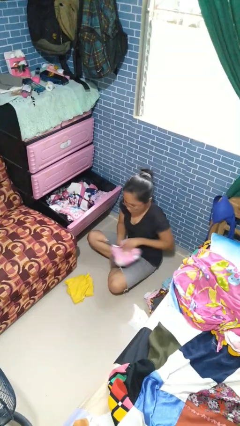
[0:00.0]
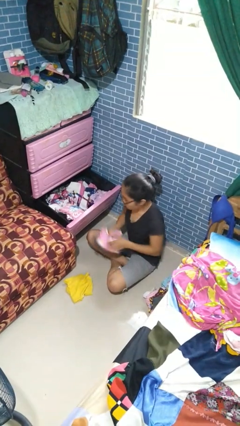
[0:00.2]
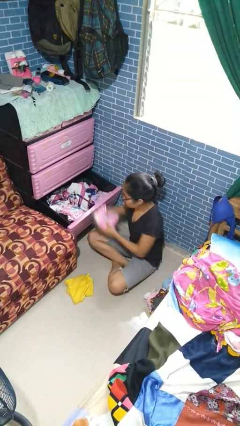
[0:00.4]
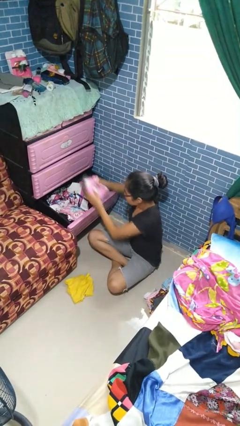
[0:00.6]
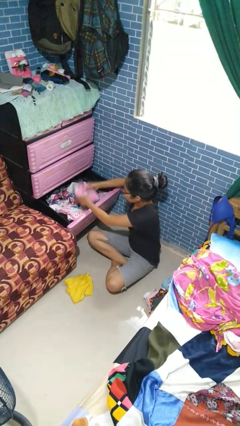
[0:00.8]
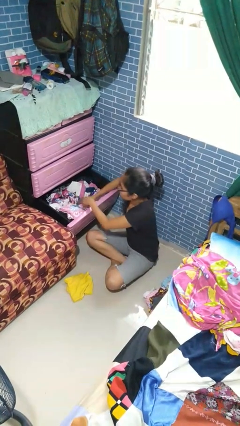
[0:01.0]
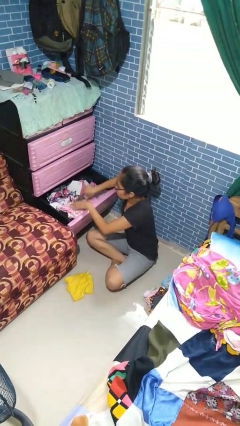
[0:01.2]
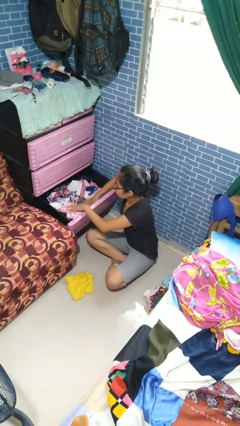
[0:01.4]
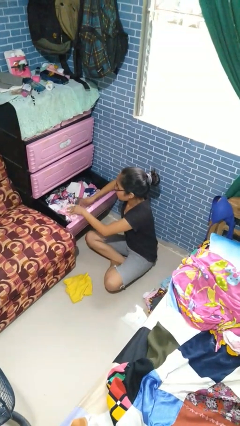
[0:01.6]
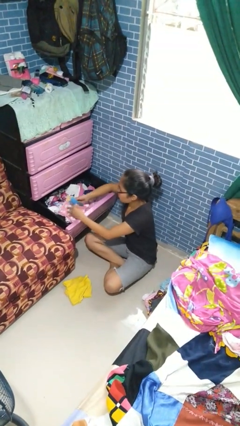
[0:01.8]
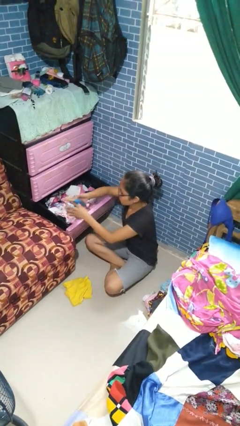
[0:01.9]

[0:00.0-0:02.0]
person puts clothes into dresser

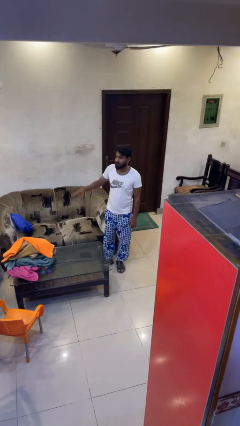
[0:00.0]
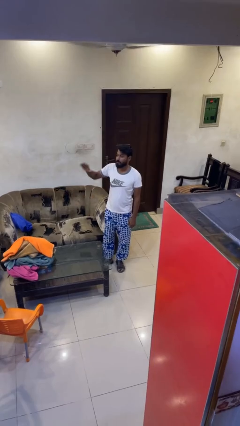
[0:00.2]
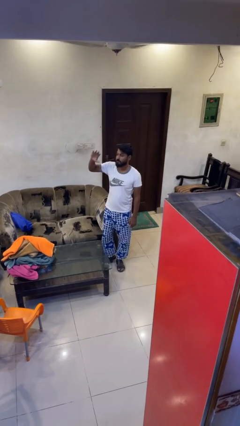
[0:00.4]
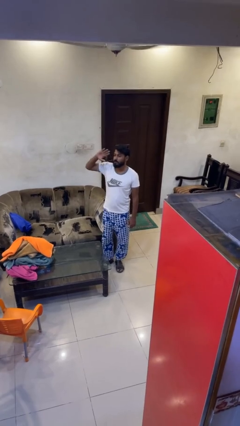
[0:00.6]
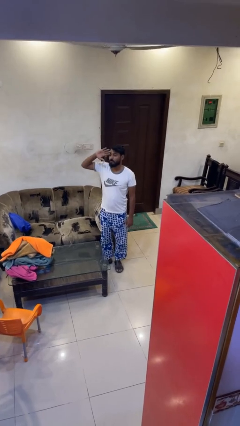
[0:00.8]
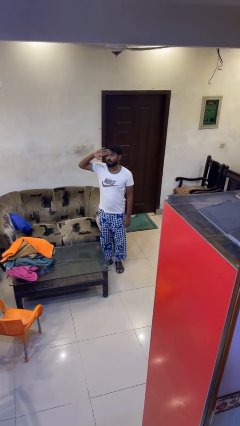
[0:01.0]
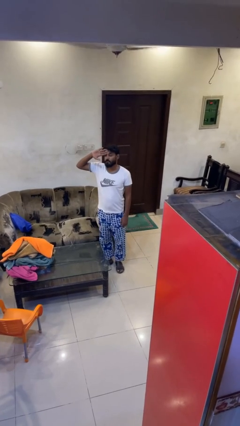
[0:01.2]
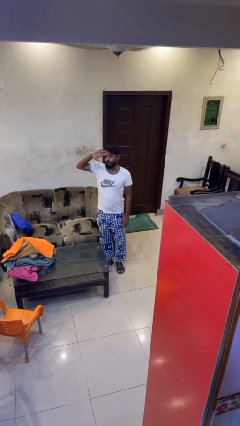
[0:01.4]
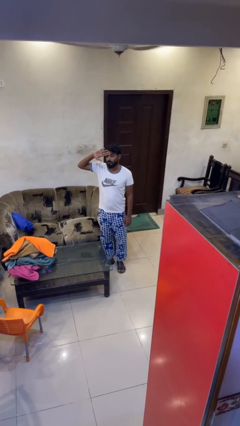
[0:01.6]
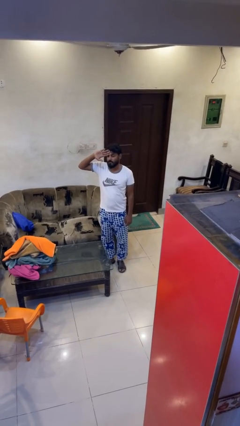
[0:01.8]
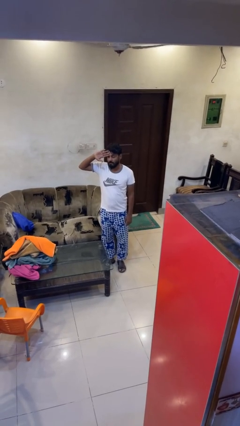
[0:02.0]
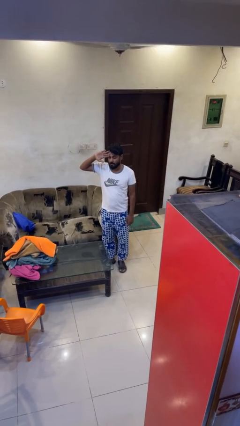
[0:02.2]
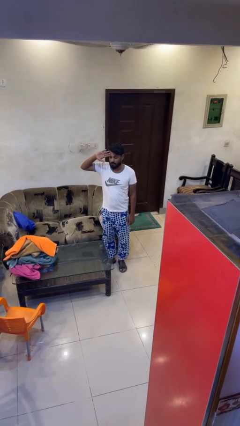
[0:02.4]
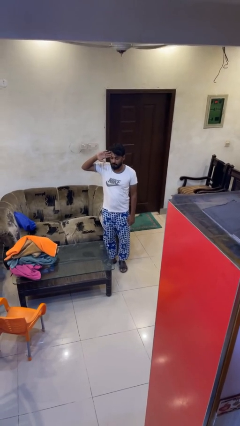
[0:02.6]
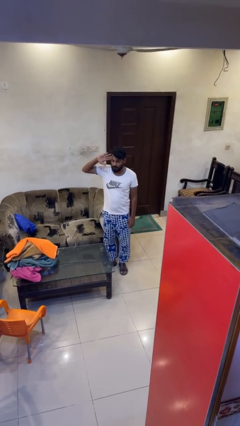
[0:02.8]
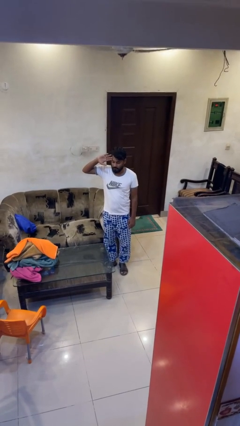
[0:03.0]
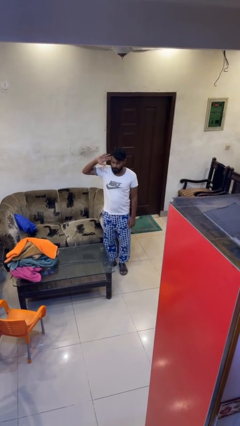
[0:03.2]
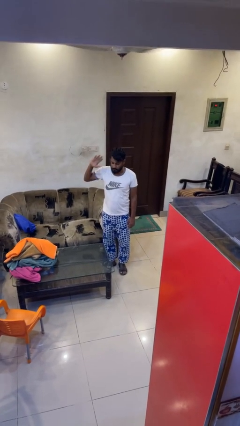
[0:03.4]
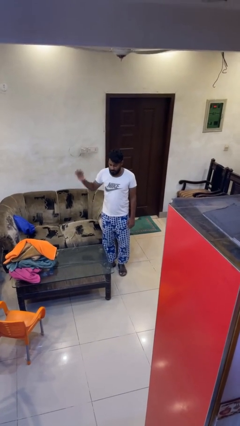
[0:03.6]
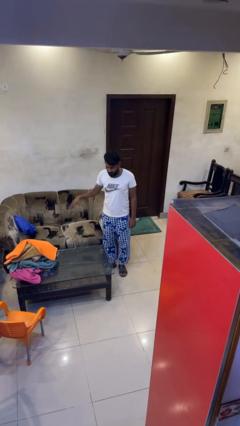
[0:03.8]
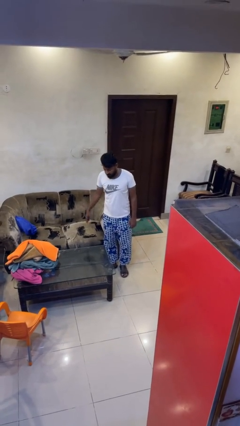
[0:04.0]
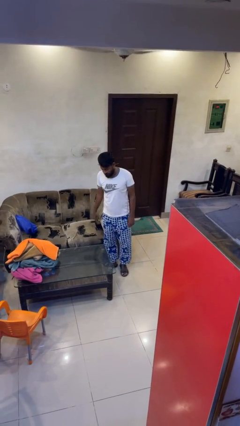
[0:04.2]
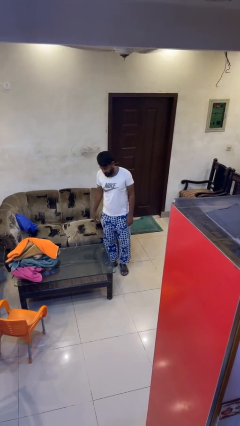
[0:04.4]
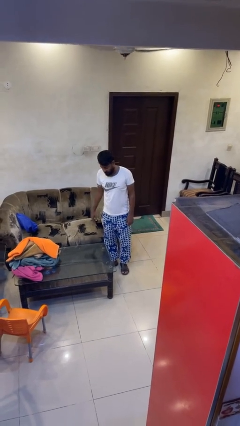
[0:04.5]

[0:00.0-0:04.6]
person salutes

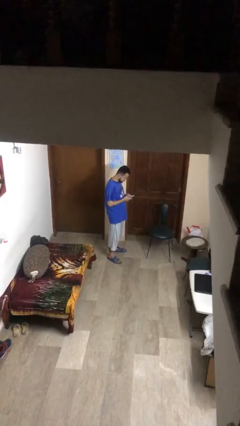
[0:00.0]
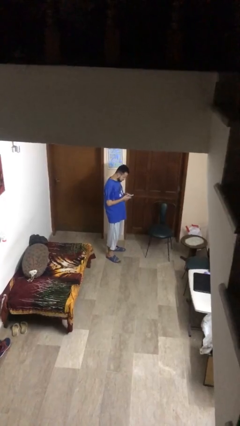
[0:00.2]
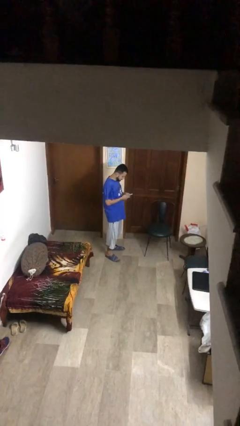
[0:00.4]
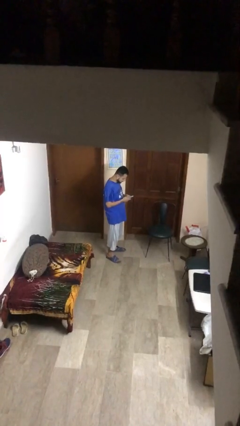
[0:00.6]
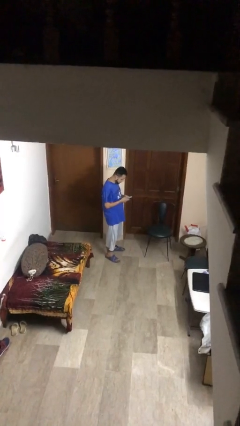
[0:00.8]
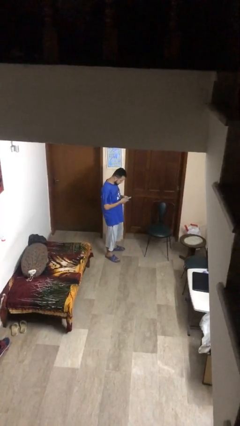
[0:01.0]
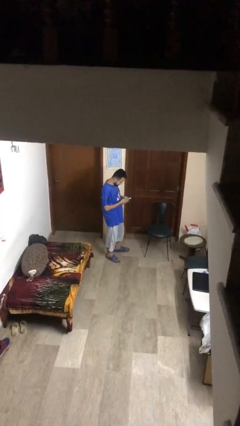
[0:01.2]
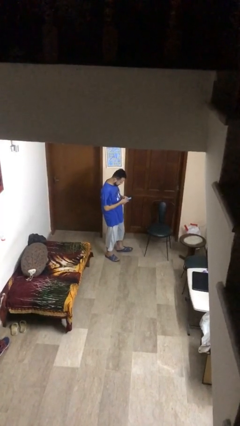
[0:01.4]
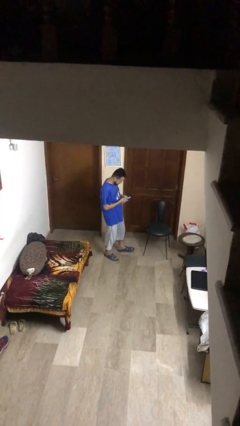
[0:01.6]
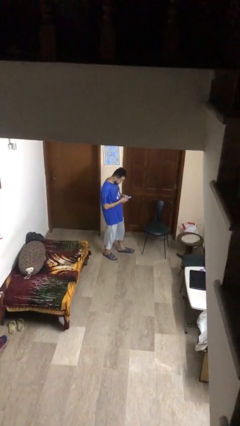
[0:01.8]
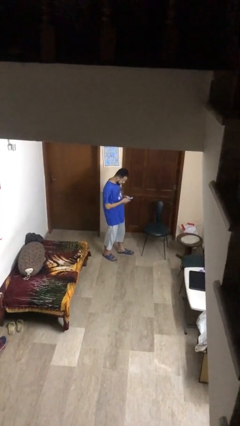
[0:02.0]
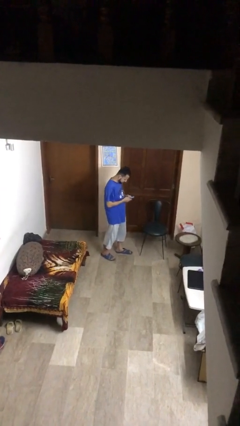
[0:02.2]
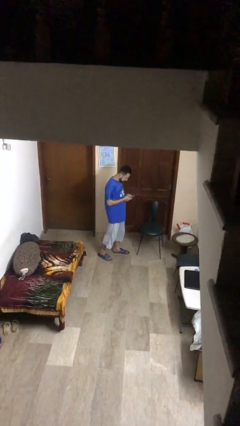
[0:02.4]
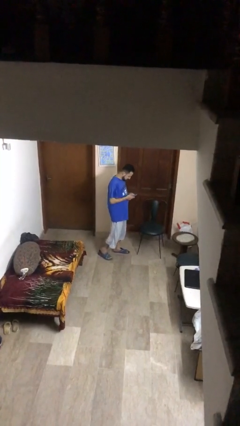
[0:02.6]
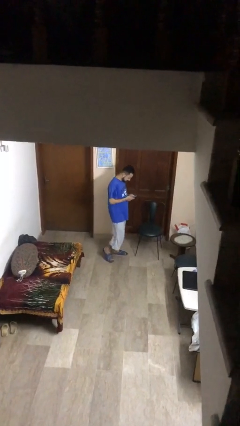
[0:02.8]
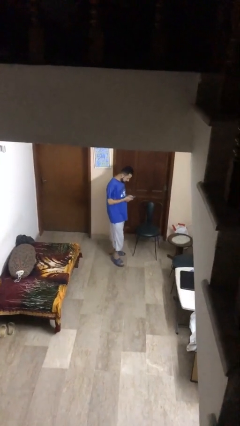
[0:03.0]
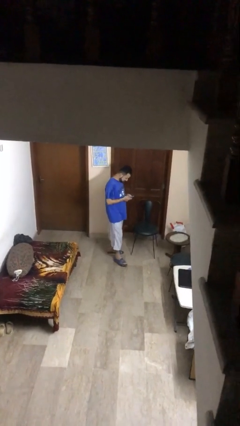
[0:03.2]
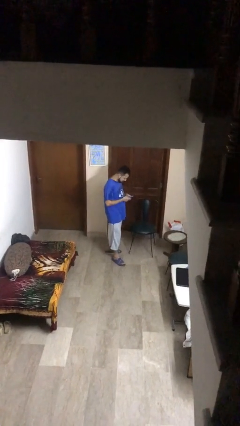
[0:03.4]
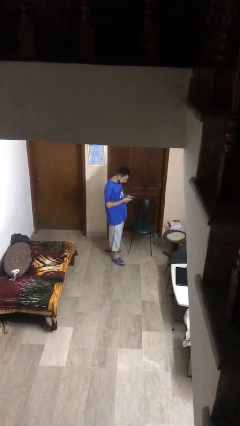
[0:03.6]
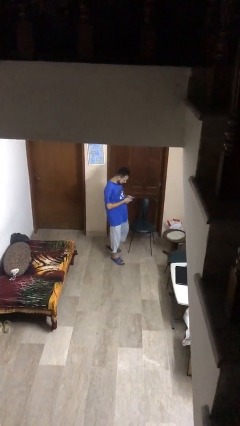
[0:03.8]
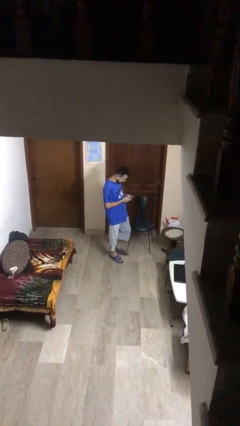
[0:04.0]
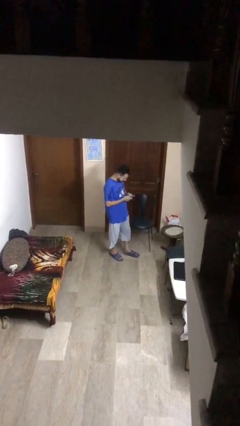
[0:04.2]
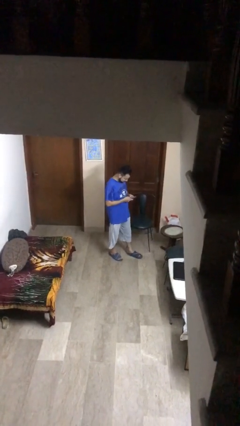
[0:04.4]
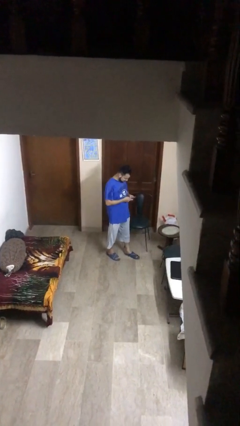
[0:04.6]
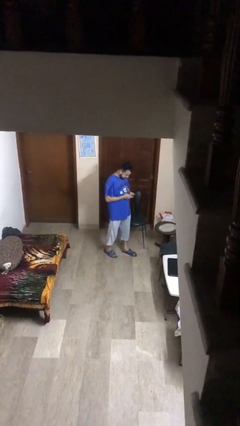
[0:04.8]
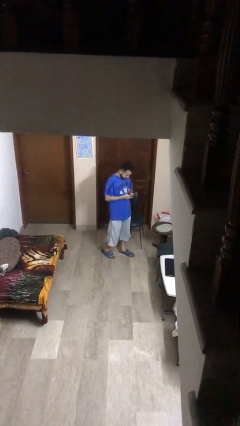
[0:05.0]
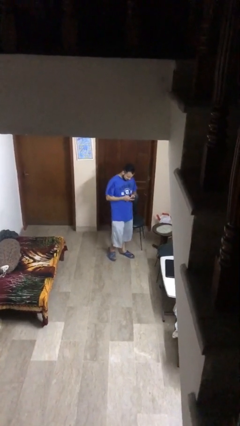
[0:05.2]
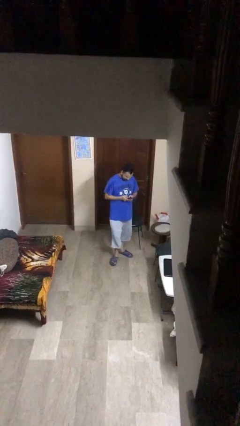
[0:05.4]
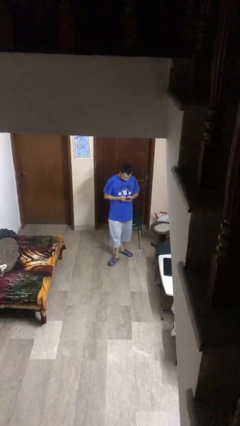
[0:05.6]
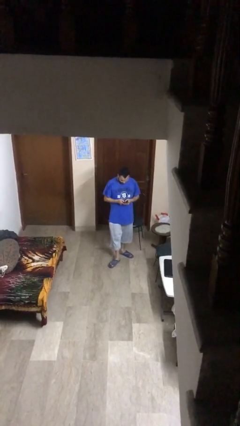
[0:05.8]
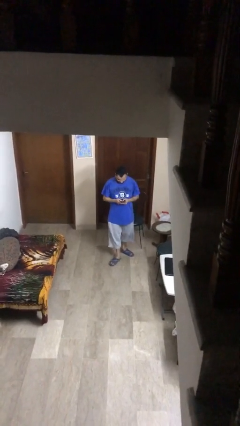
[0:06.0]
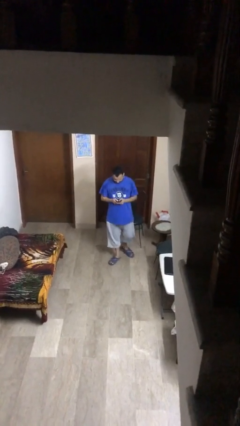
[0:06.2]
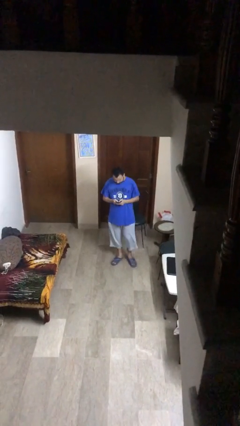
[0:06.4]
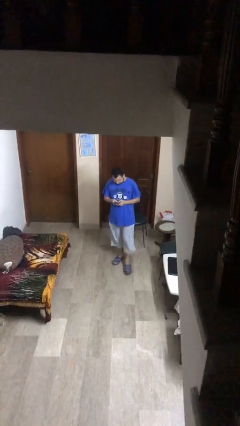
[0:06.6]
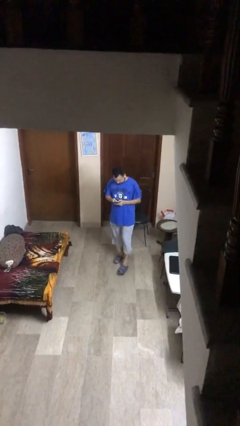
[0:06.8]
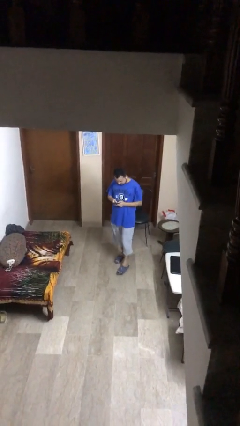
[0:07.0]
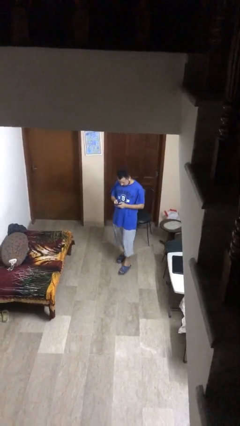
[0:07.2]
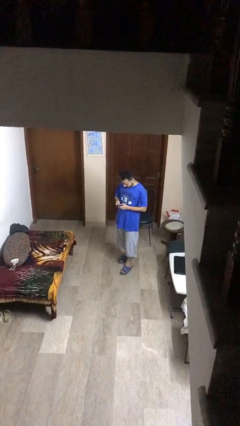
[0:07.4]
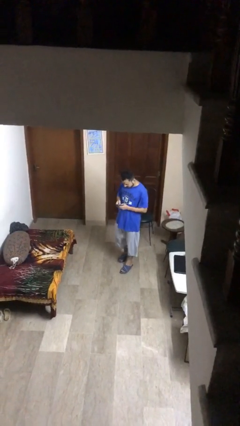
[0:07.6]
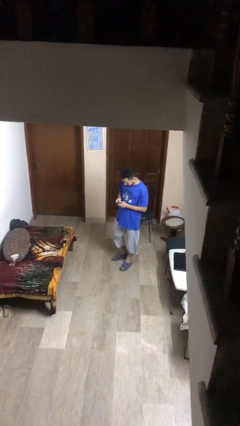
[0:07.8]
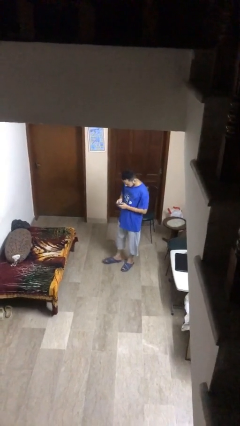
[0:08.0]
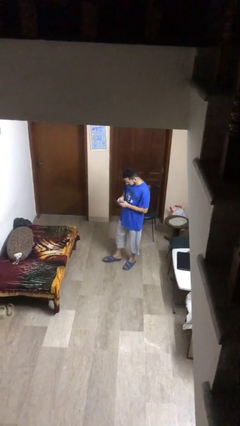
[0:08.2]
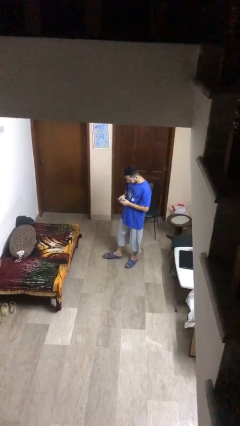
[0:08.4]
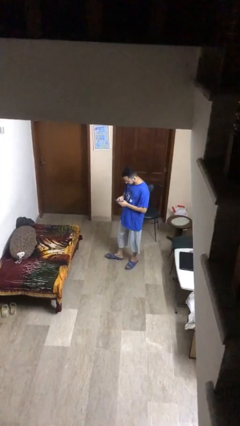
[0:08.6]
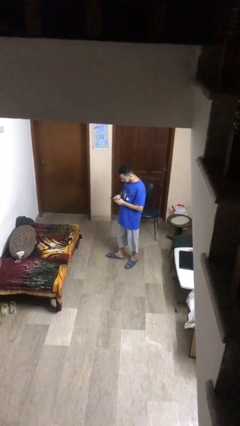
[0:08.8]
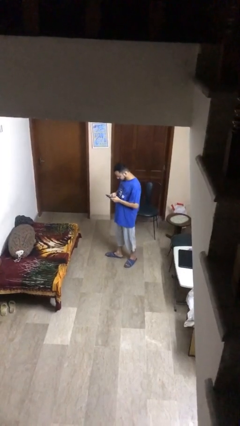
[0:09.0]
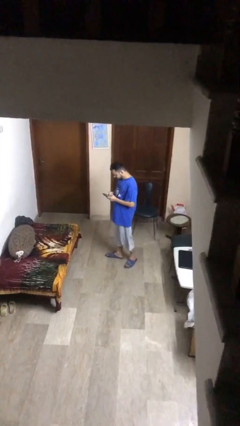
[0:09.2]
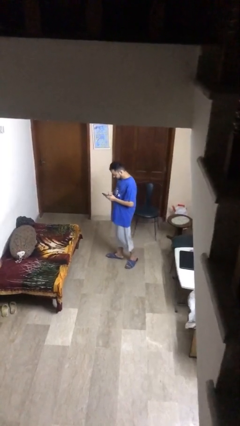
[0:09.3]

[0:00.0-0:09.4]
person texts on phone

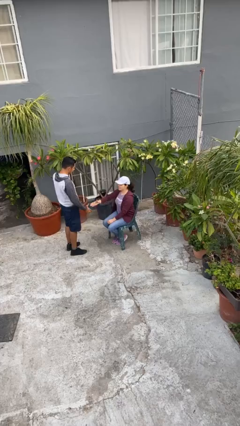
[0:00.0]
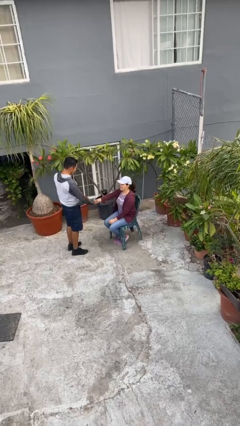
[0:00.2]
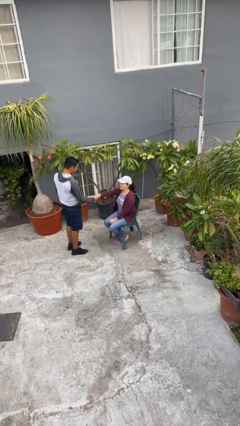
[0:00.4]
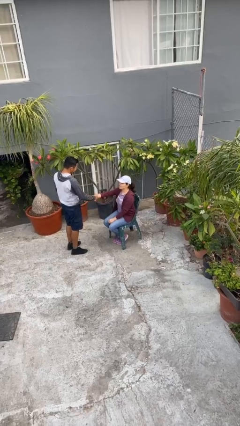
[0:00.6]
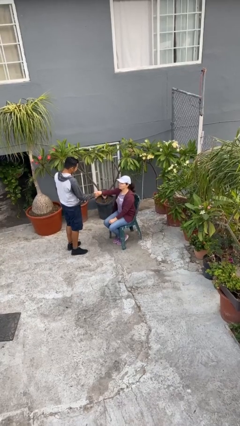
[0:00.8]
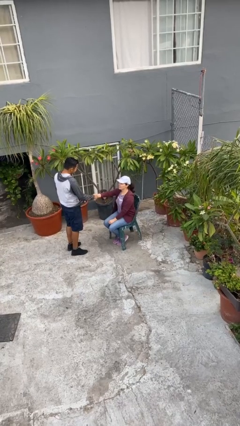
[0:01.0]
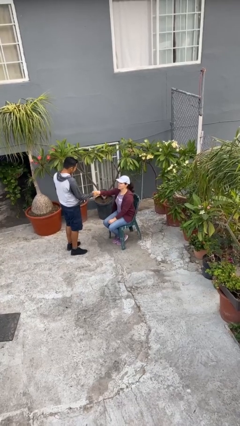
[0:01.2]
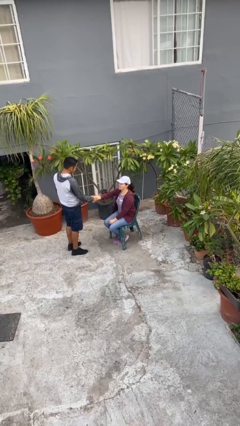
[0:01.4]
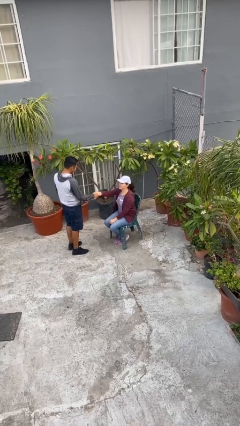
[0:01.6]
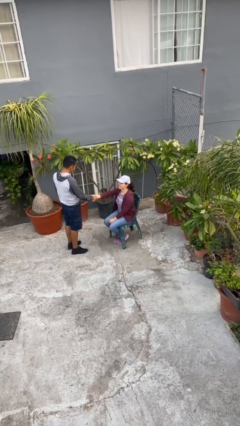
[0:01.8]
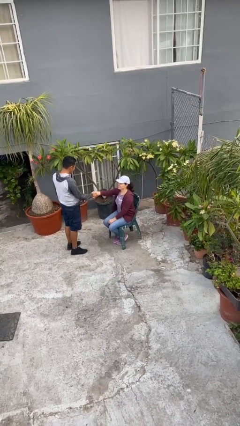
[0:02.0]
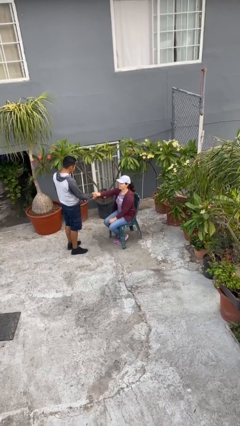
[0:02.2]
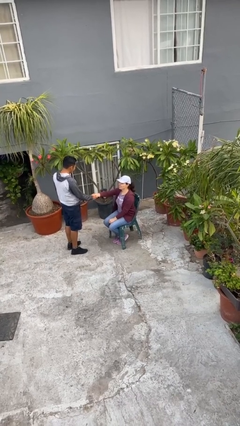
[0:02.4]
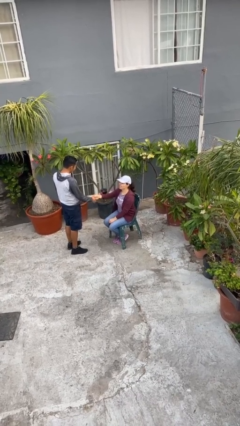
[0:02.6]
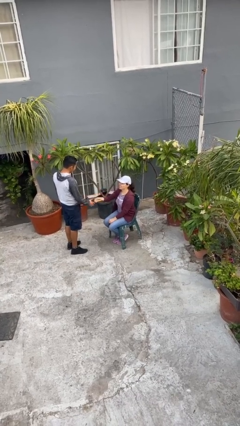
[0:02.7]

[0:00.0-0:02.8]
person shakes hand
